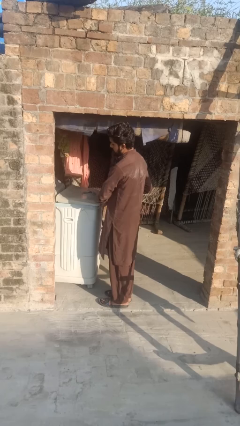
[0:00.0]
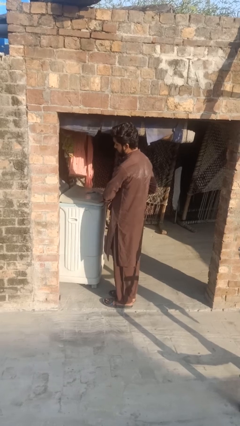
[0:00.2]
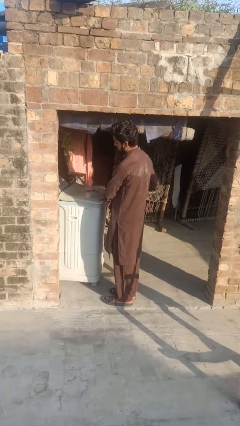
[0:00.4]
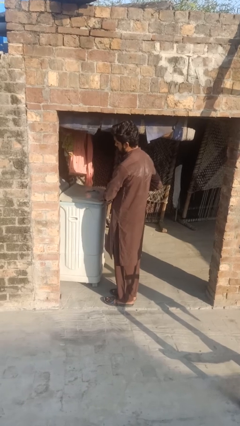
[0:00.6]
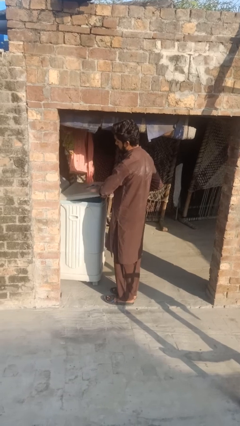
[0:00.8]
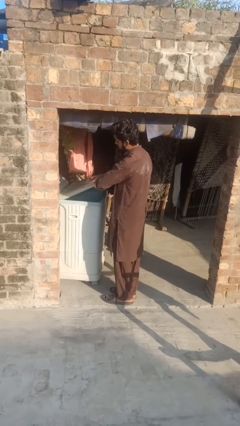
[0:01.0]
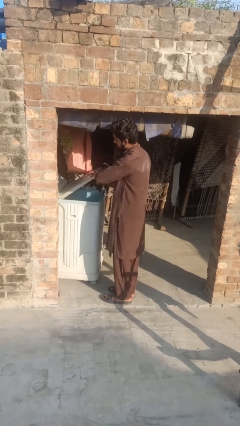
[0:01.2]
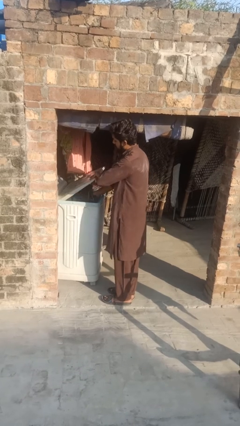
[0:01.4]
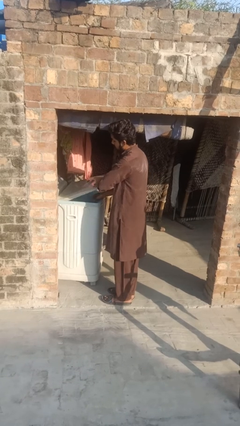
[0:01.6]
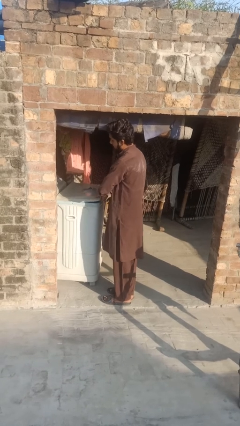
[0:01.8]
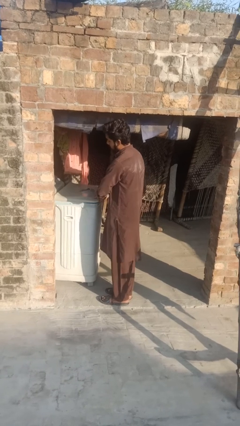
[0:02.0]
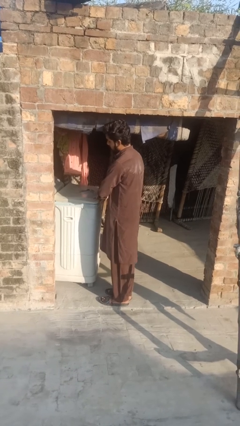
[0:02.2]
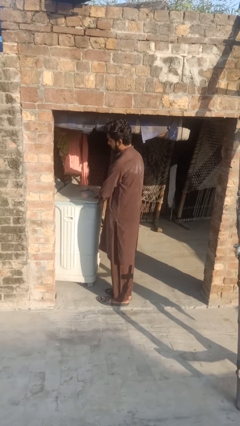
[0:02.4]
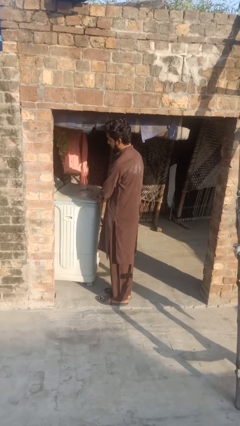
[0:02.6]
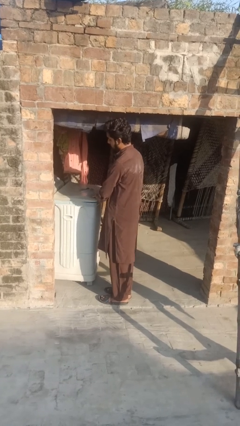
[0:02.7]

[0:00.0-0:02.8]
person loads dryer

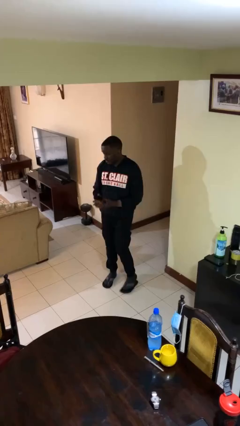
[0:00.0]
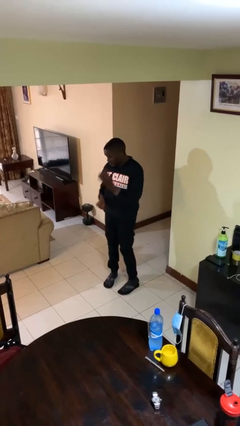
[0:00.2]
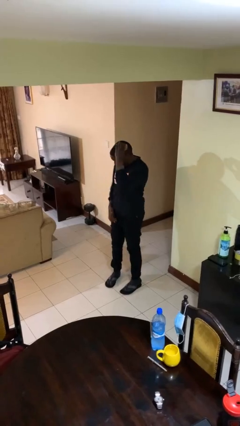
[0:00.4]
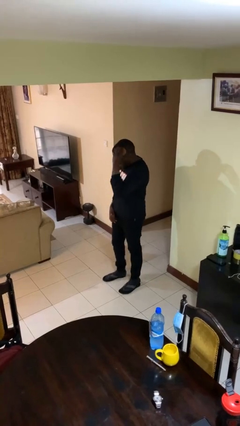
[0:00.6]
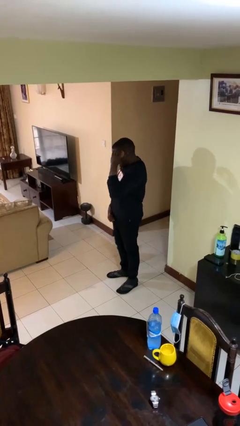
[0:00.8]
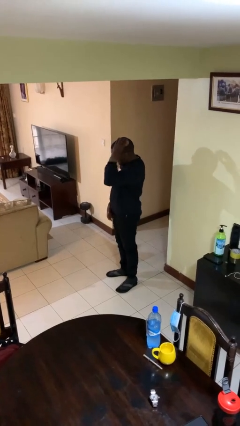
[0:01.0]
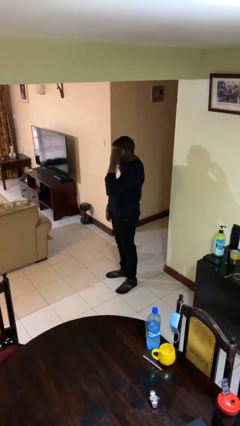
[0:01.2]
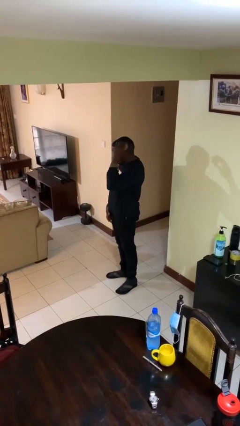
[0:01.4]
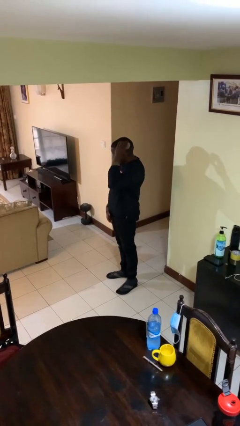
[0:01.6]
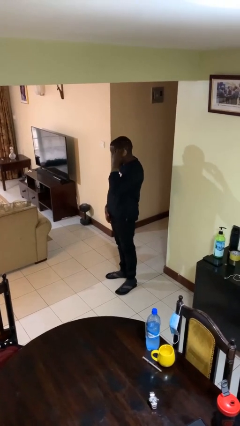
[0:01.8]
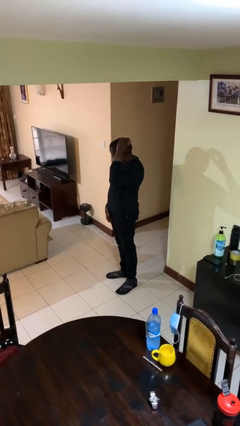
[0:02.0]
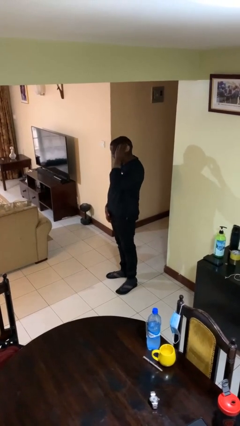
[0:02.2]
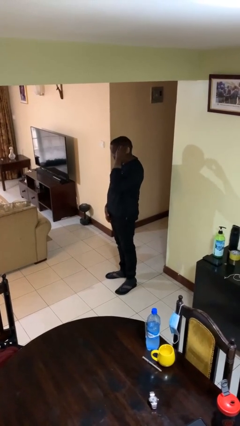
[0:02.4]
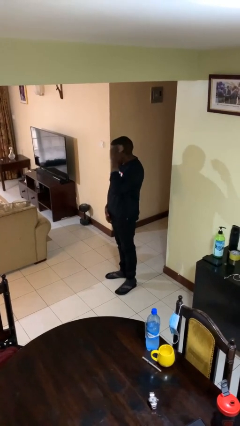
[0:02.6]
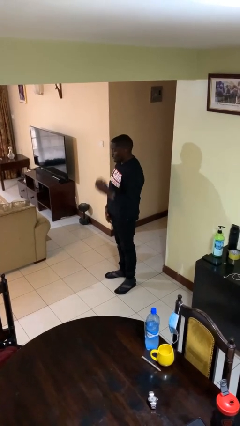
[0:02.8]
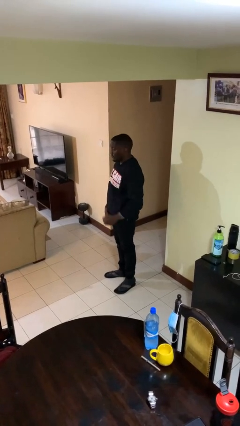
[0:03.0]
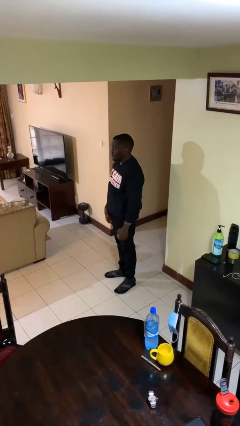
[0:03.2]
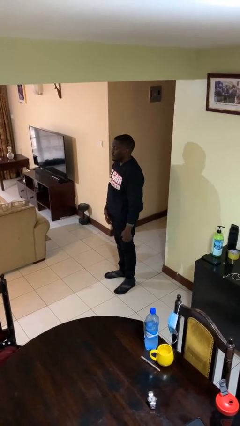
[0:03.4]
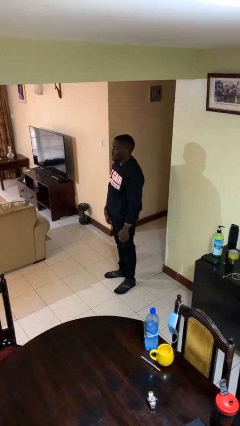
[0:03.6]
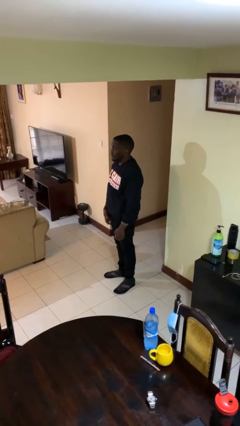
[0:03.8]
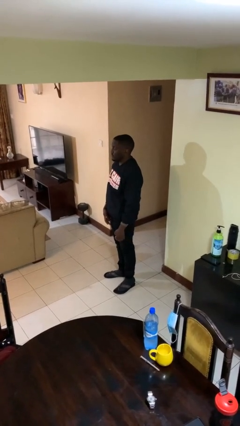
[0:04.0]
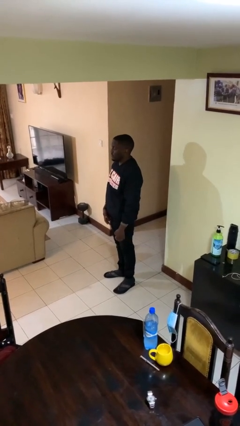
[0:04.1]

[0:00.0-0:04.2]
person brushes hair

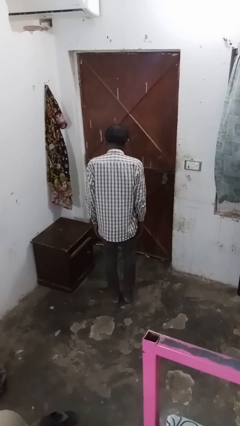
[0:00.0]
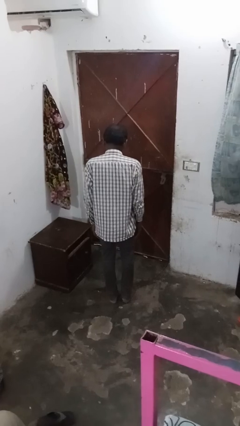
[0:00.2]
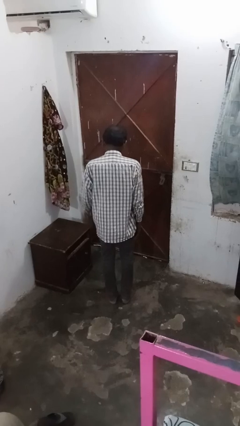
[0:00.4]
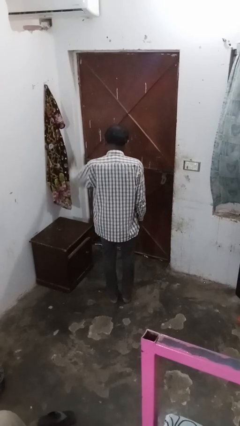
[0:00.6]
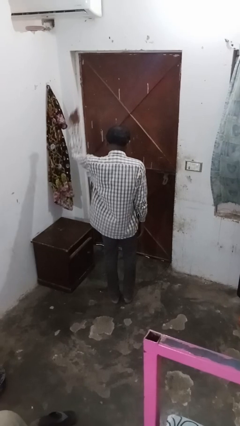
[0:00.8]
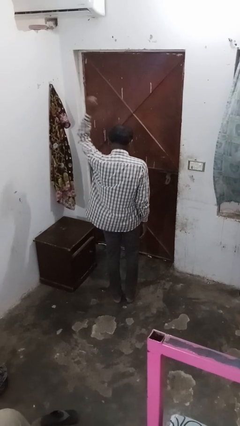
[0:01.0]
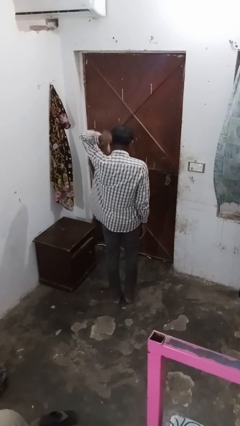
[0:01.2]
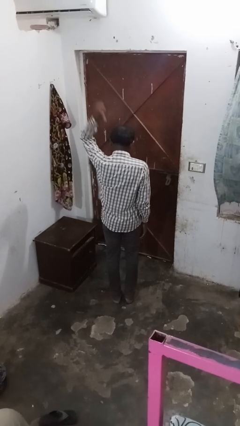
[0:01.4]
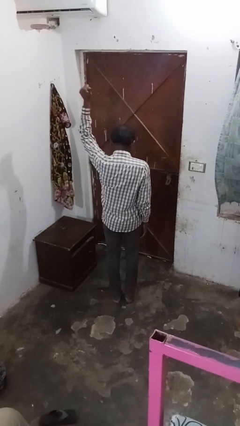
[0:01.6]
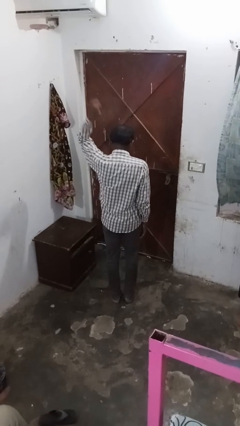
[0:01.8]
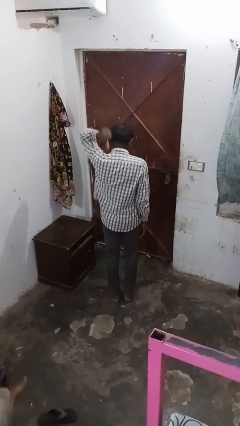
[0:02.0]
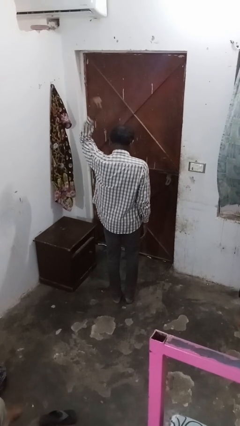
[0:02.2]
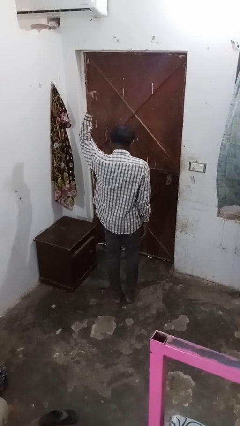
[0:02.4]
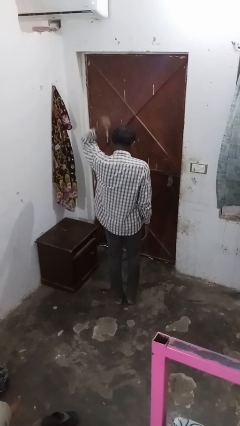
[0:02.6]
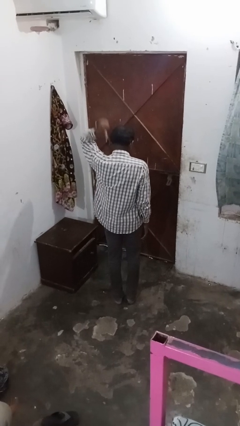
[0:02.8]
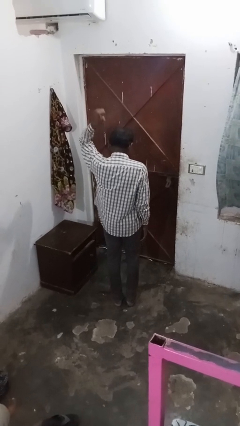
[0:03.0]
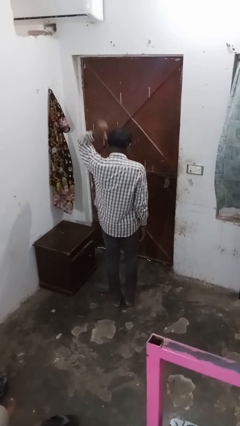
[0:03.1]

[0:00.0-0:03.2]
person gestures behind me

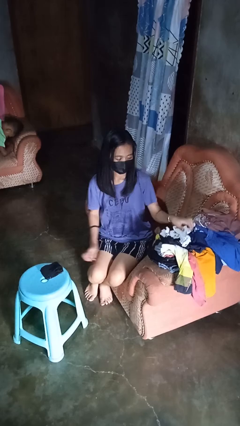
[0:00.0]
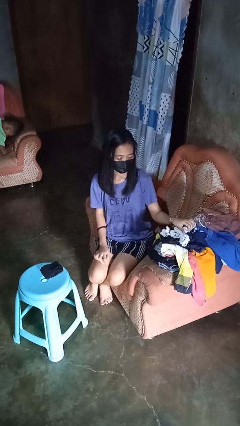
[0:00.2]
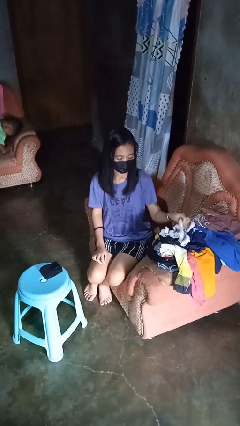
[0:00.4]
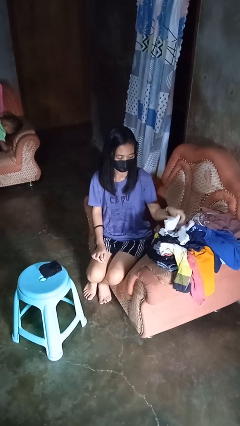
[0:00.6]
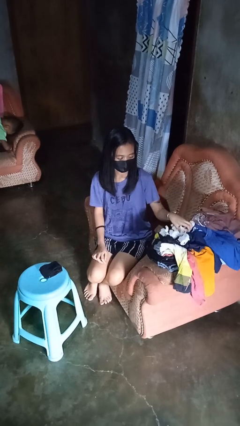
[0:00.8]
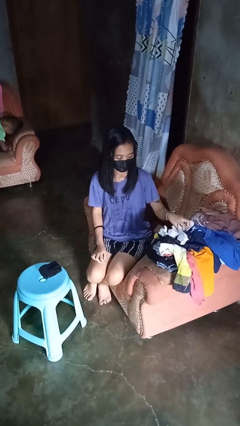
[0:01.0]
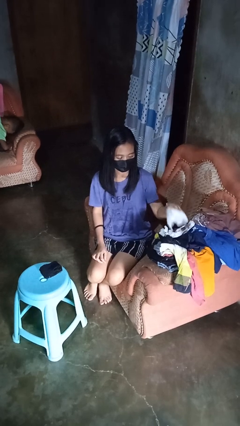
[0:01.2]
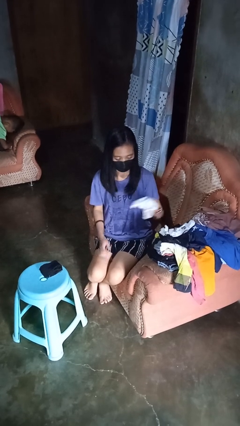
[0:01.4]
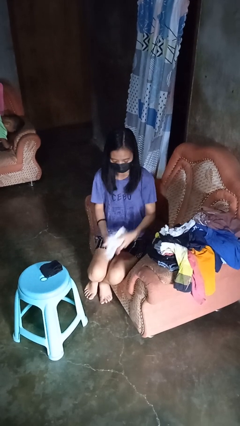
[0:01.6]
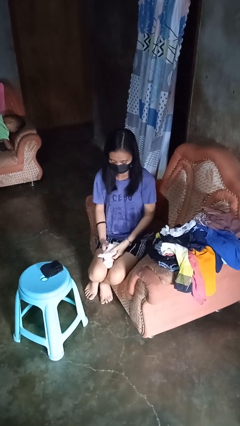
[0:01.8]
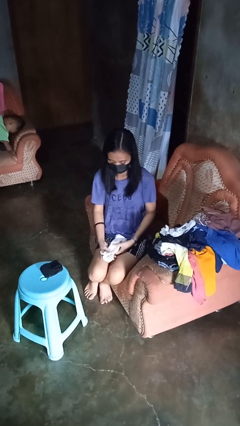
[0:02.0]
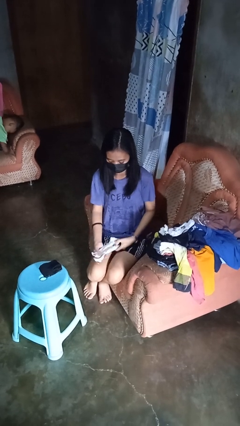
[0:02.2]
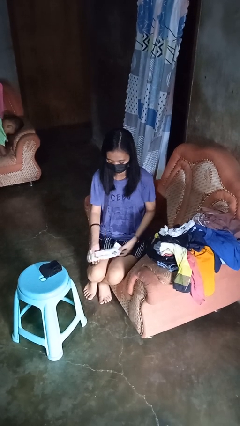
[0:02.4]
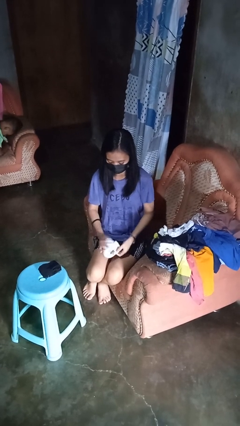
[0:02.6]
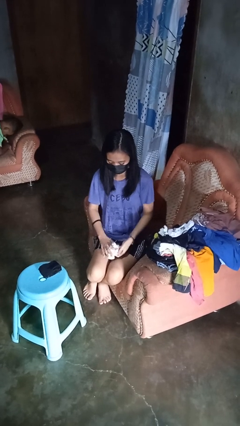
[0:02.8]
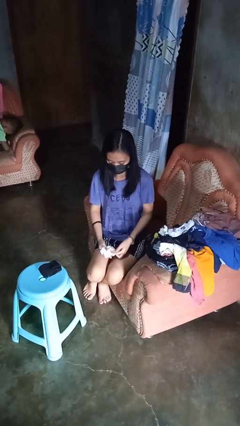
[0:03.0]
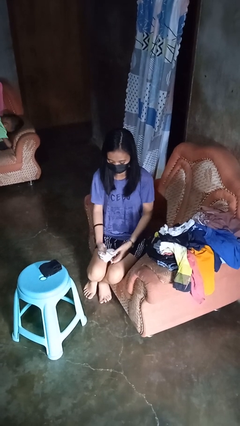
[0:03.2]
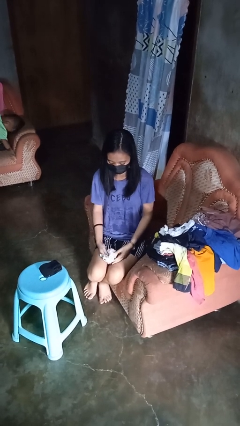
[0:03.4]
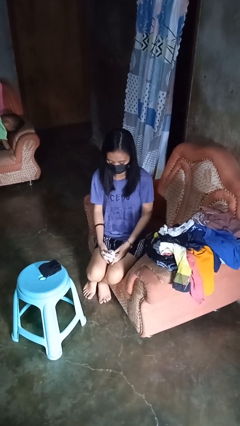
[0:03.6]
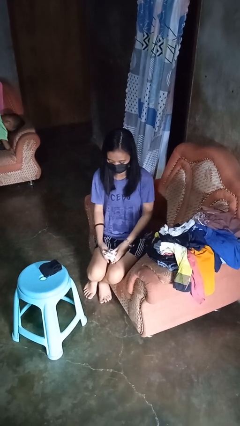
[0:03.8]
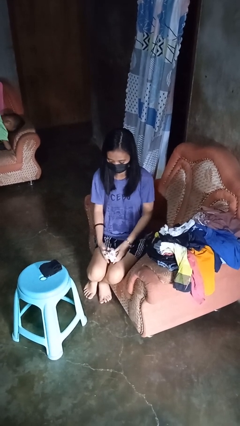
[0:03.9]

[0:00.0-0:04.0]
person folds socks

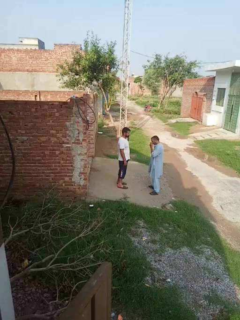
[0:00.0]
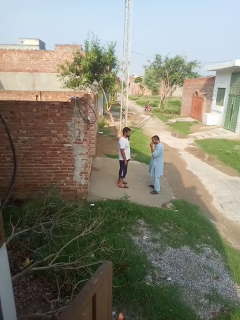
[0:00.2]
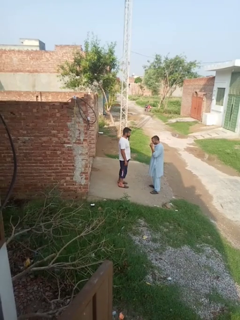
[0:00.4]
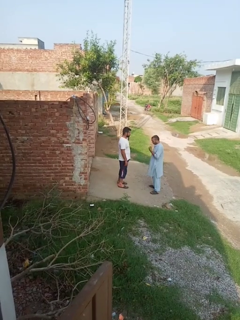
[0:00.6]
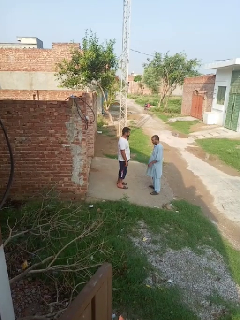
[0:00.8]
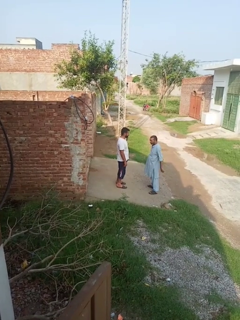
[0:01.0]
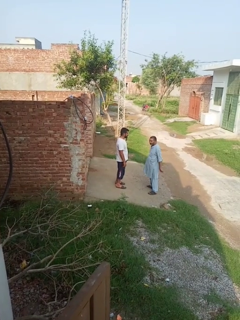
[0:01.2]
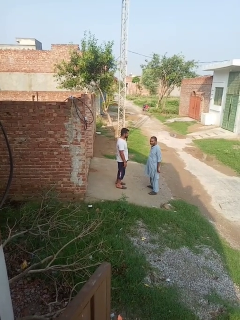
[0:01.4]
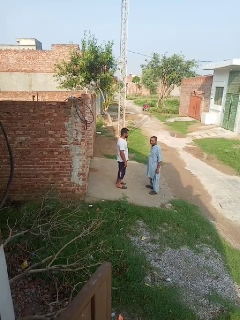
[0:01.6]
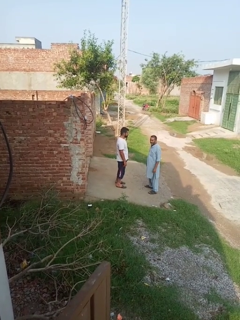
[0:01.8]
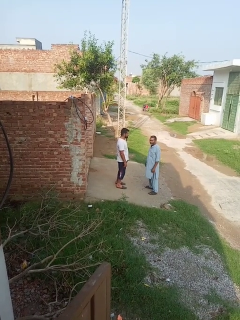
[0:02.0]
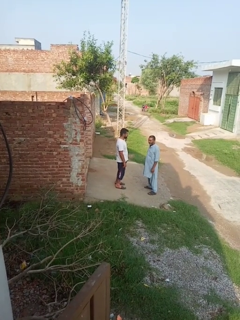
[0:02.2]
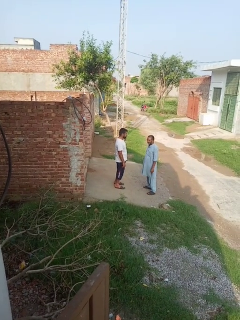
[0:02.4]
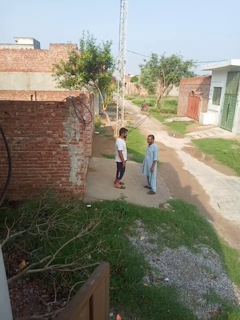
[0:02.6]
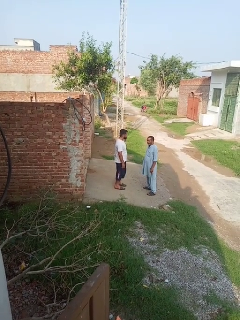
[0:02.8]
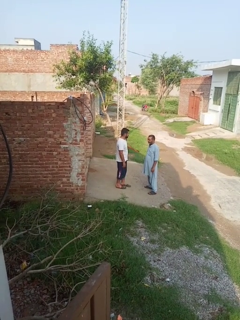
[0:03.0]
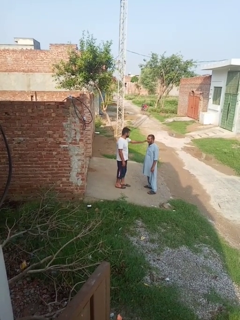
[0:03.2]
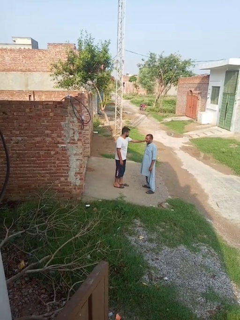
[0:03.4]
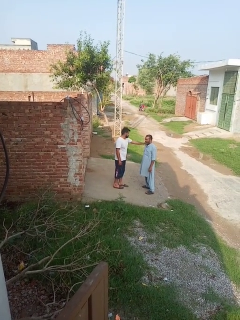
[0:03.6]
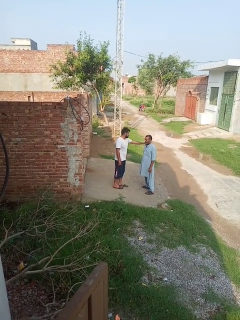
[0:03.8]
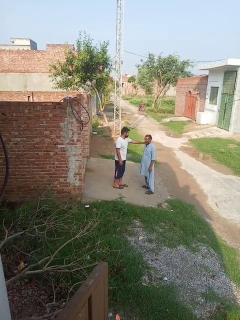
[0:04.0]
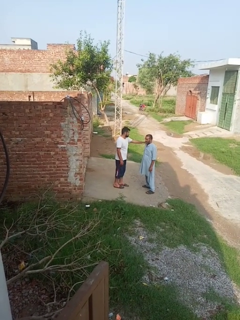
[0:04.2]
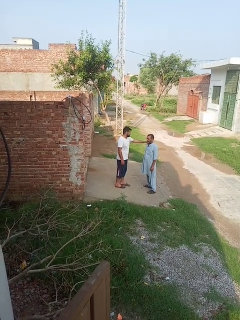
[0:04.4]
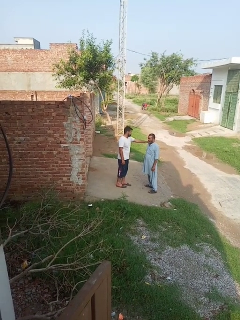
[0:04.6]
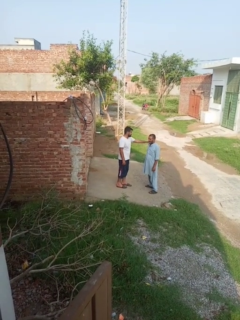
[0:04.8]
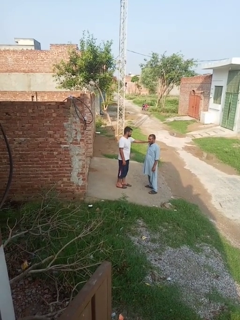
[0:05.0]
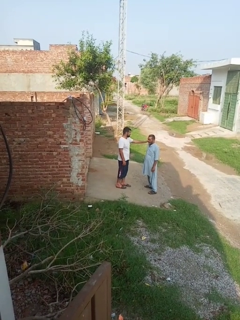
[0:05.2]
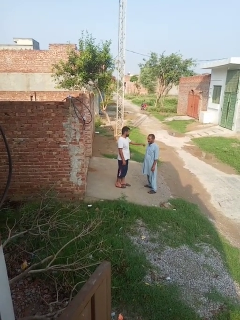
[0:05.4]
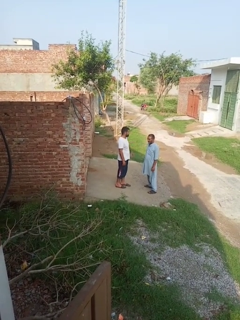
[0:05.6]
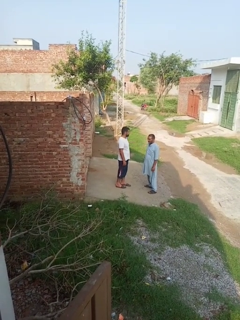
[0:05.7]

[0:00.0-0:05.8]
person pounds shoulders of person
